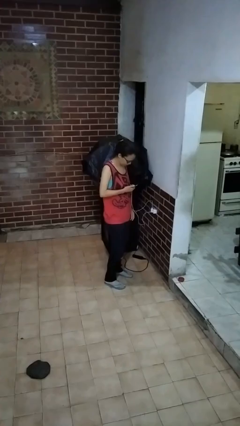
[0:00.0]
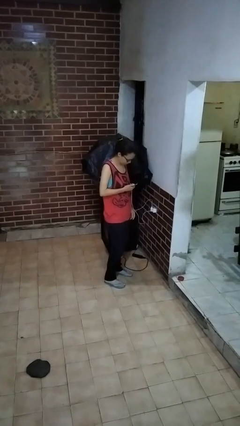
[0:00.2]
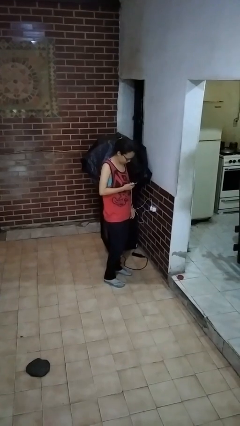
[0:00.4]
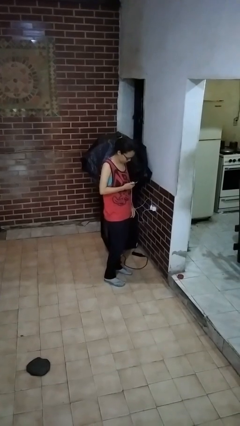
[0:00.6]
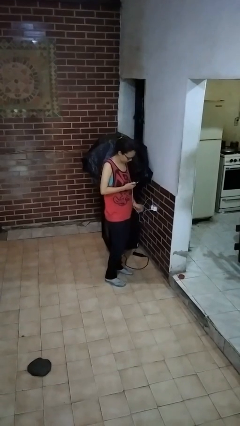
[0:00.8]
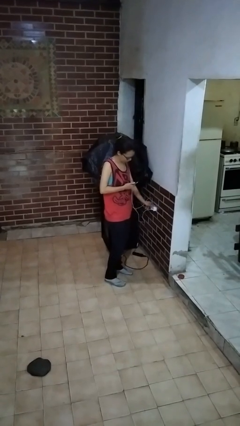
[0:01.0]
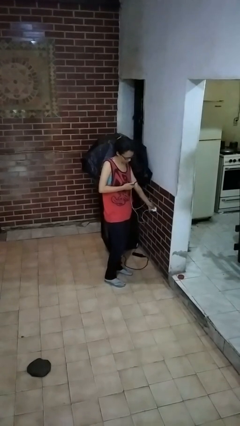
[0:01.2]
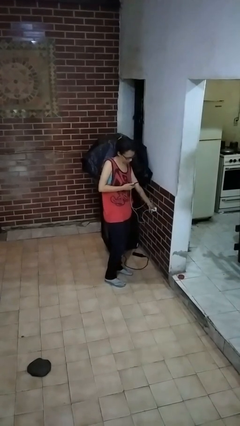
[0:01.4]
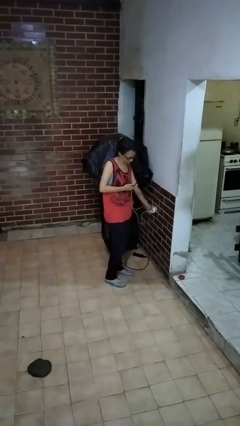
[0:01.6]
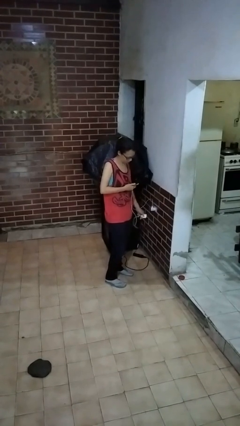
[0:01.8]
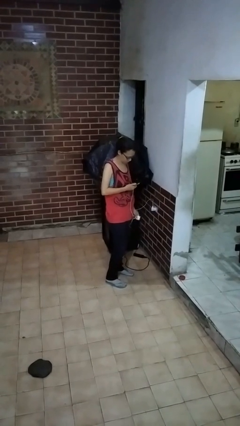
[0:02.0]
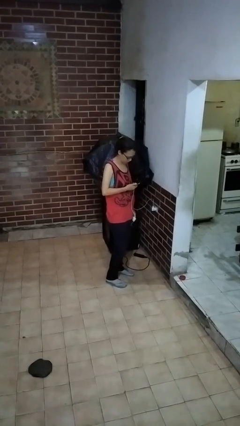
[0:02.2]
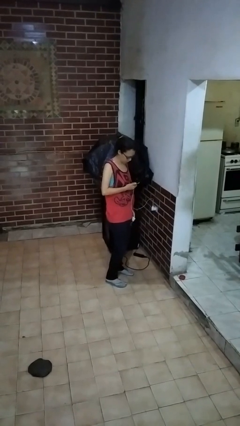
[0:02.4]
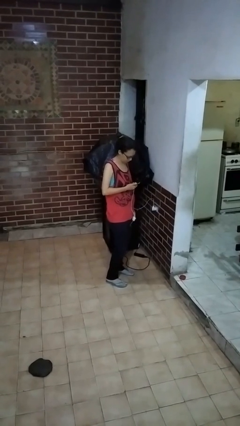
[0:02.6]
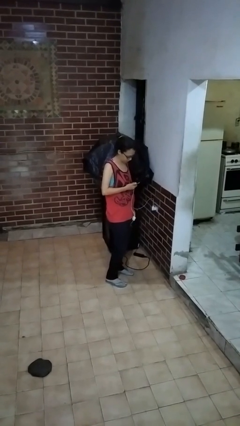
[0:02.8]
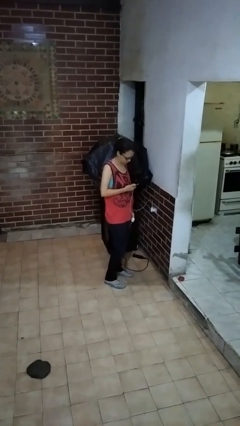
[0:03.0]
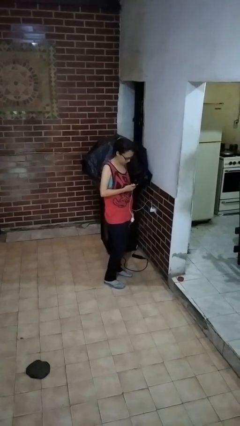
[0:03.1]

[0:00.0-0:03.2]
person unplugs from electrical socket

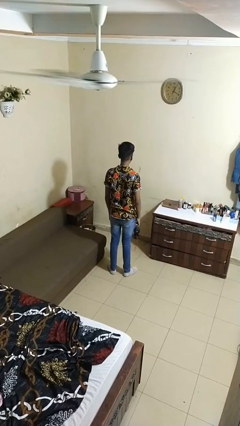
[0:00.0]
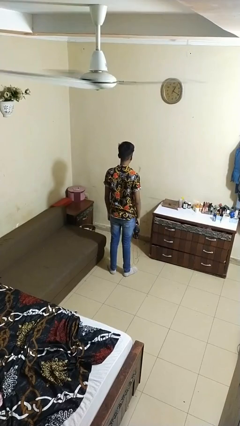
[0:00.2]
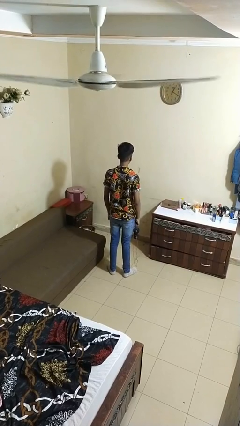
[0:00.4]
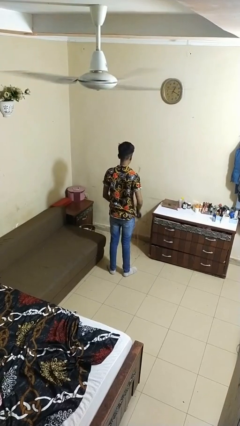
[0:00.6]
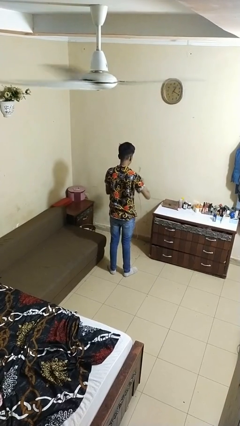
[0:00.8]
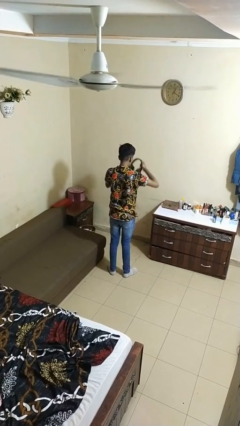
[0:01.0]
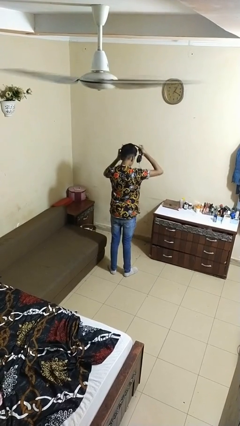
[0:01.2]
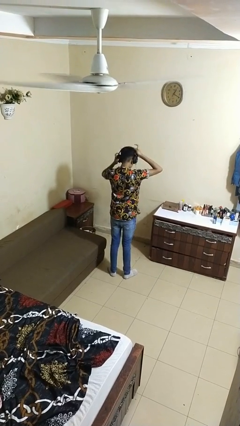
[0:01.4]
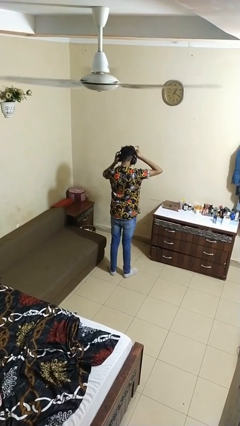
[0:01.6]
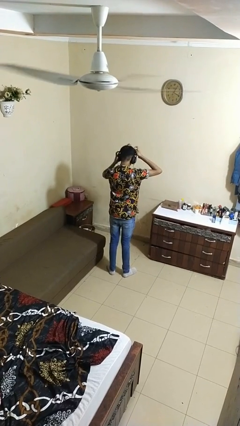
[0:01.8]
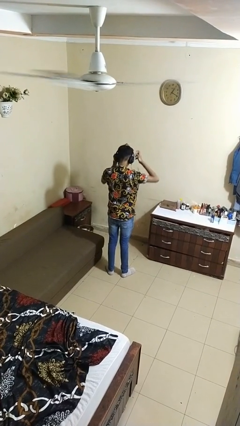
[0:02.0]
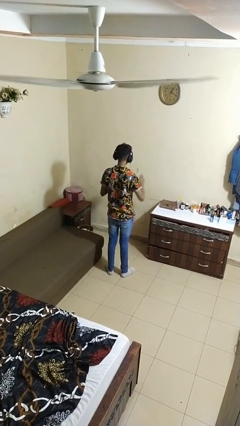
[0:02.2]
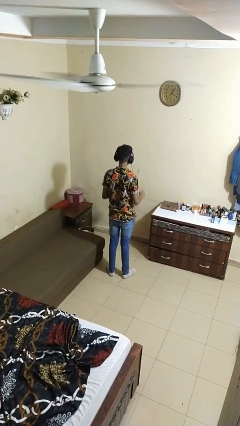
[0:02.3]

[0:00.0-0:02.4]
person puts on headphones

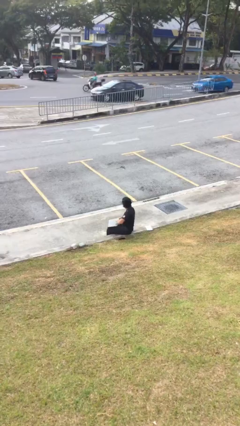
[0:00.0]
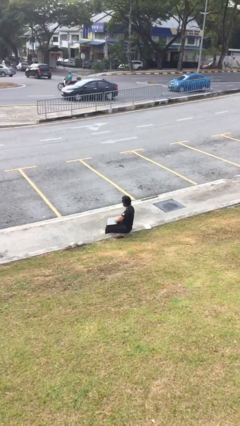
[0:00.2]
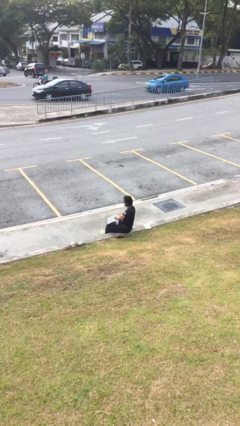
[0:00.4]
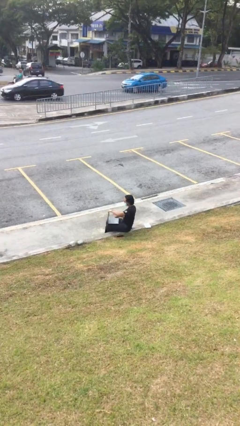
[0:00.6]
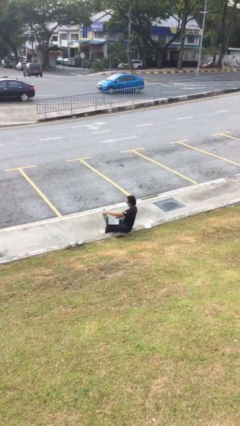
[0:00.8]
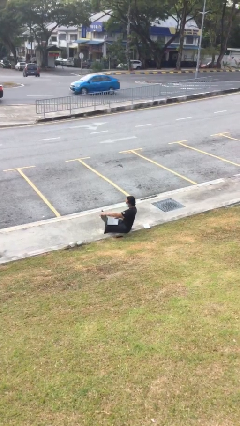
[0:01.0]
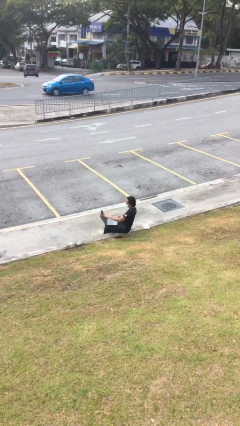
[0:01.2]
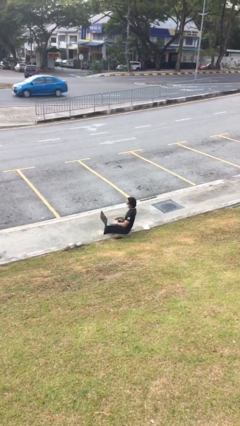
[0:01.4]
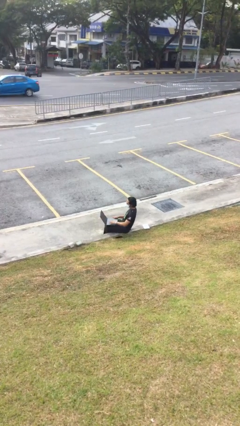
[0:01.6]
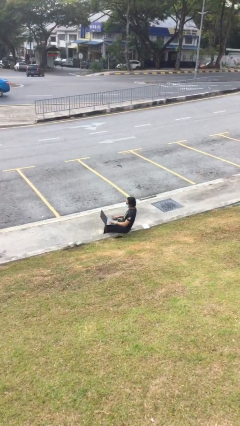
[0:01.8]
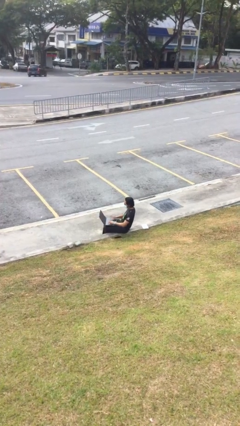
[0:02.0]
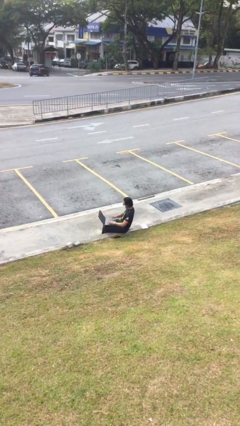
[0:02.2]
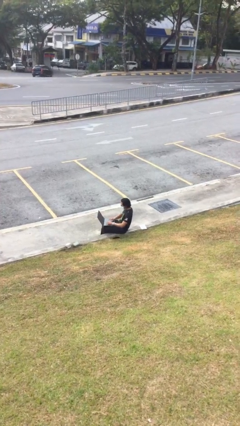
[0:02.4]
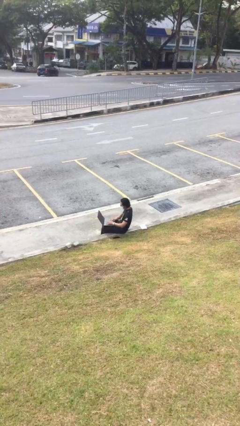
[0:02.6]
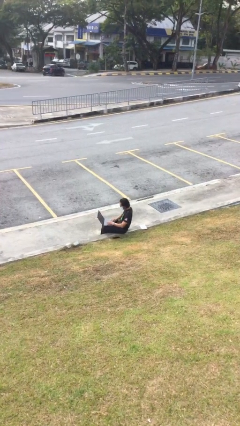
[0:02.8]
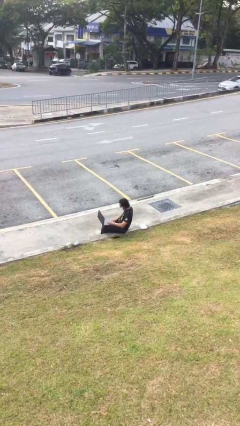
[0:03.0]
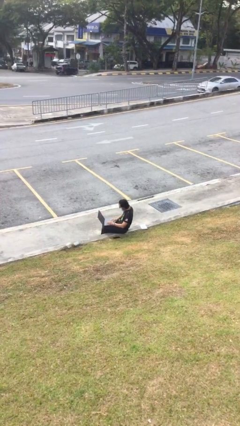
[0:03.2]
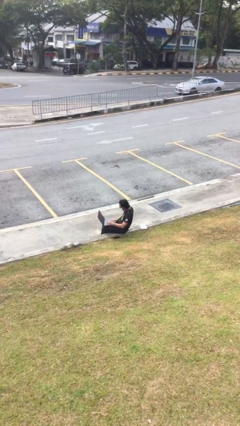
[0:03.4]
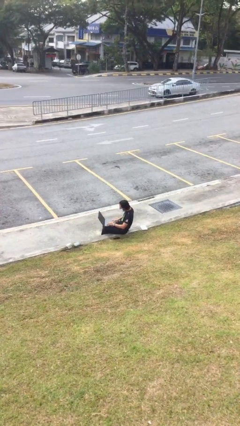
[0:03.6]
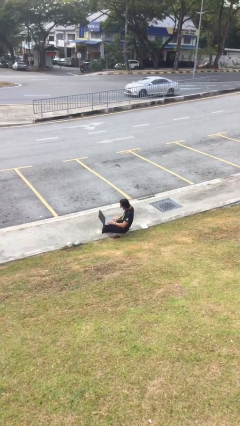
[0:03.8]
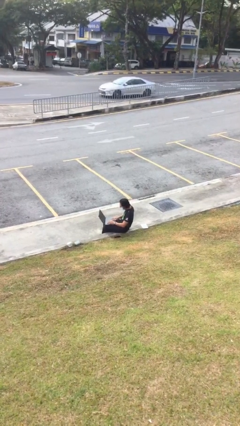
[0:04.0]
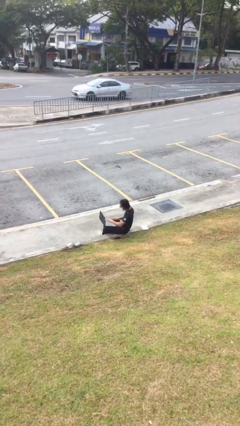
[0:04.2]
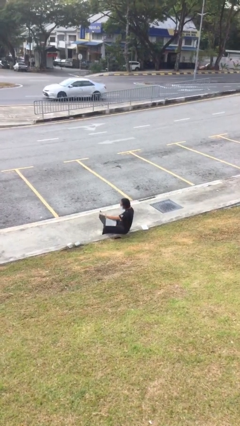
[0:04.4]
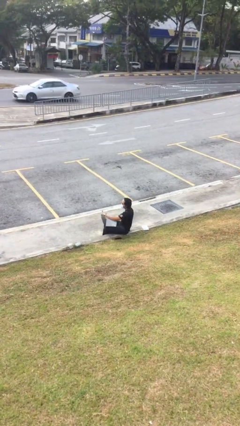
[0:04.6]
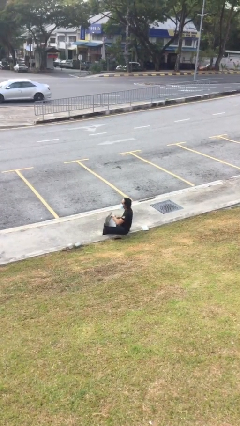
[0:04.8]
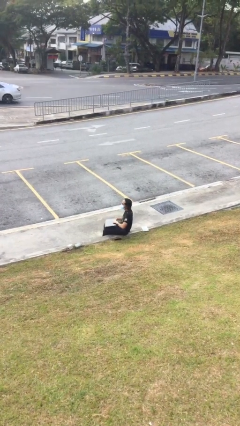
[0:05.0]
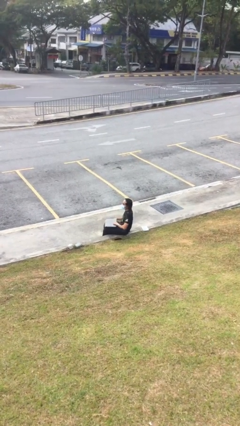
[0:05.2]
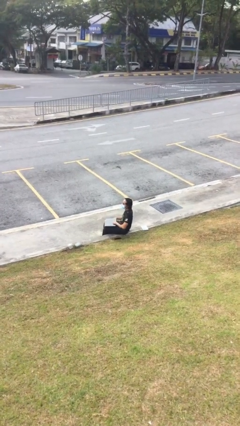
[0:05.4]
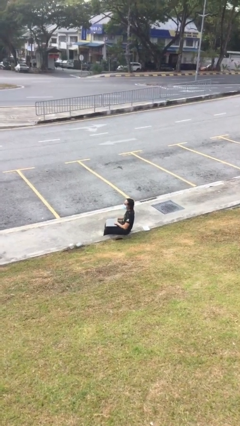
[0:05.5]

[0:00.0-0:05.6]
person interacts with laptop

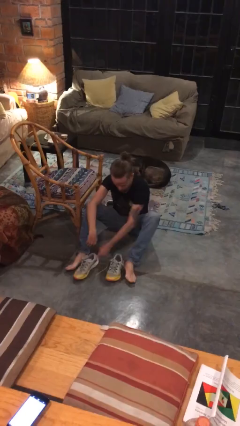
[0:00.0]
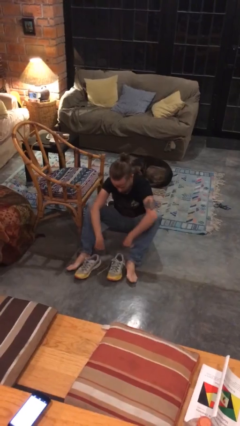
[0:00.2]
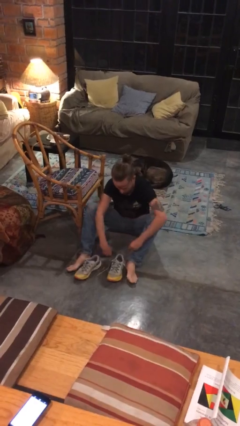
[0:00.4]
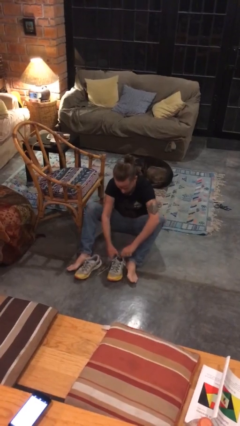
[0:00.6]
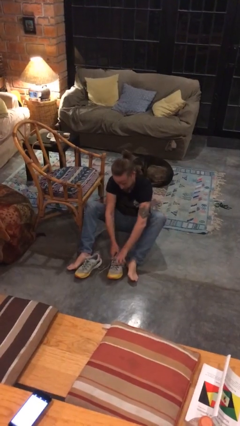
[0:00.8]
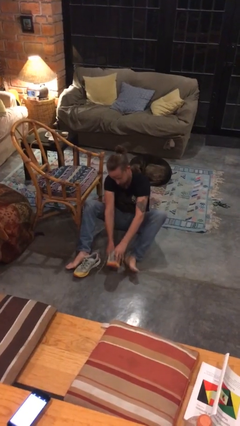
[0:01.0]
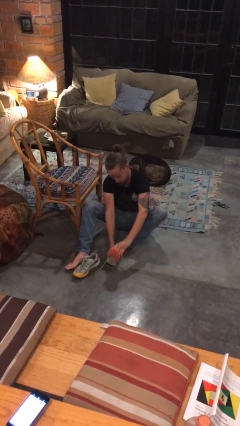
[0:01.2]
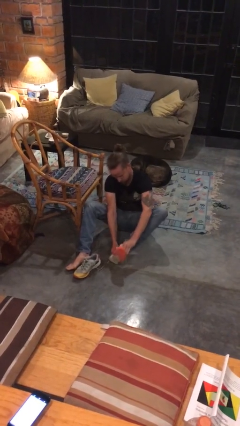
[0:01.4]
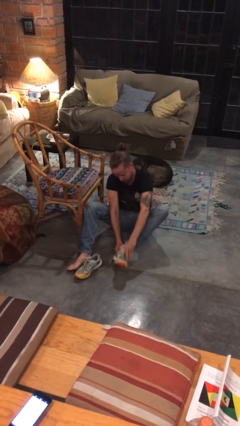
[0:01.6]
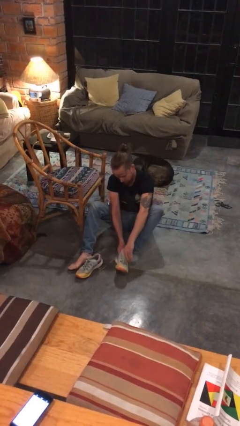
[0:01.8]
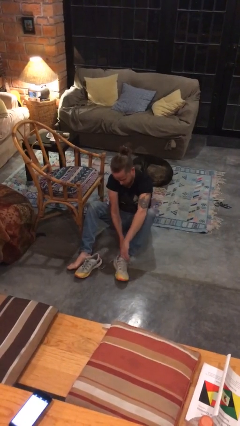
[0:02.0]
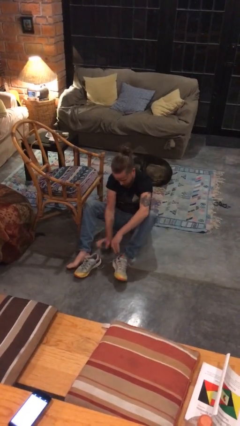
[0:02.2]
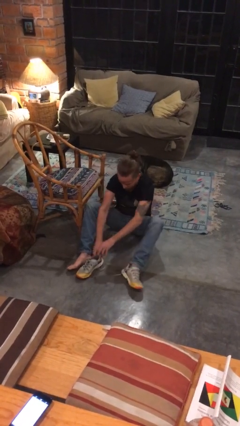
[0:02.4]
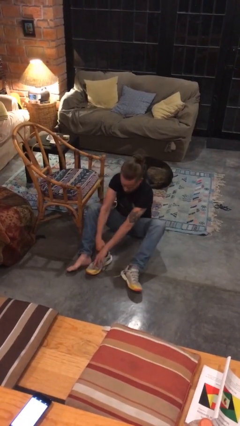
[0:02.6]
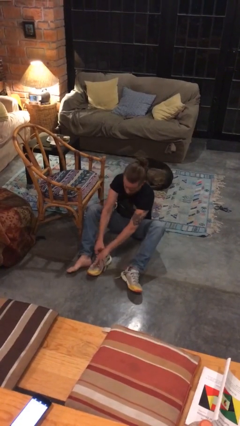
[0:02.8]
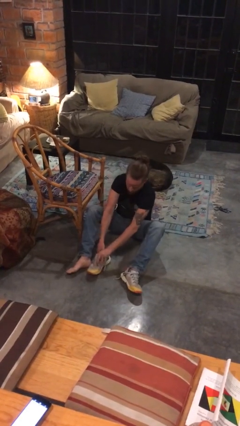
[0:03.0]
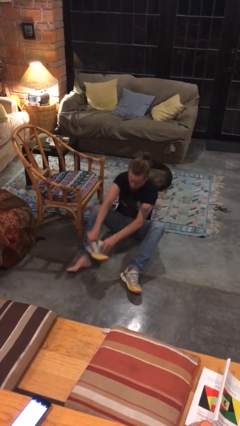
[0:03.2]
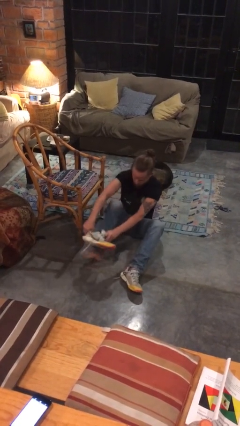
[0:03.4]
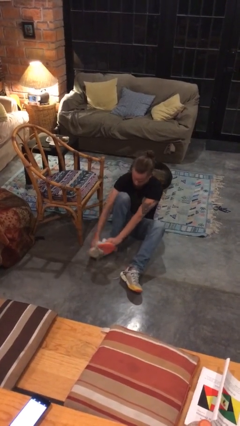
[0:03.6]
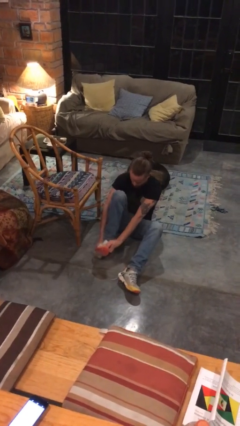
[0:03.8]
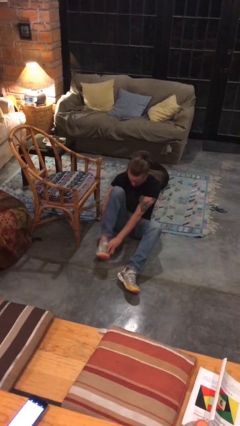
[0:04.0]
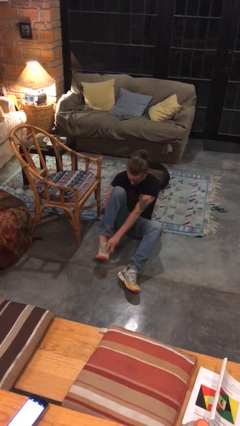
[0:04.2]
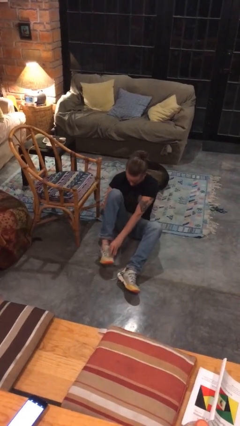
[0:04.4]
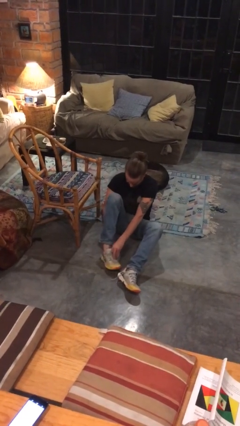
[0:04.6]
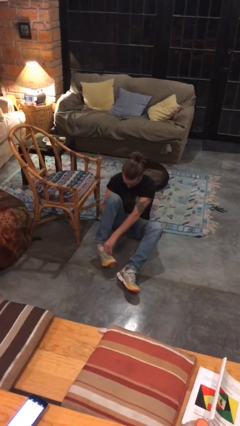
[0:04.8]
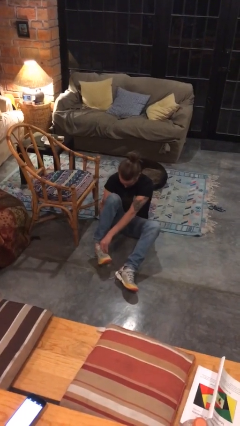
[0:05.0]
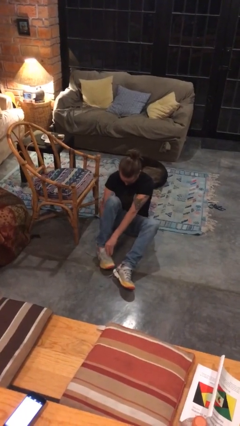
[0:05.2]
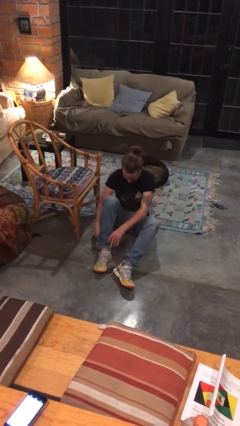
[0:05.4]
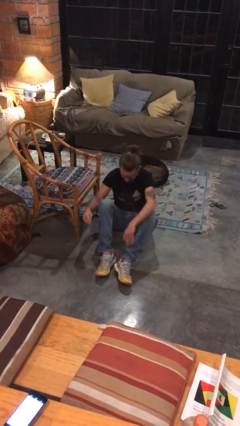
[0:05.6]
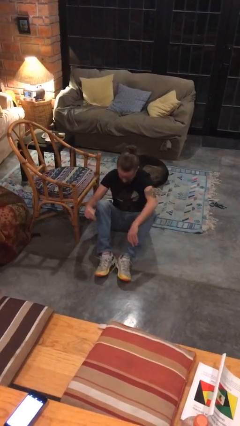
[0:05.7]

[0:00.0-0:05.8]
person puts on shoes

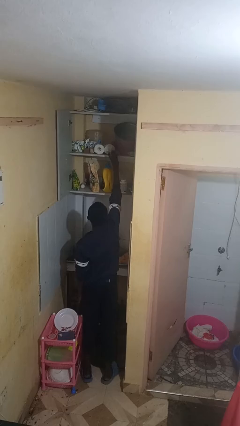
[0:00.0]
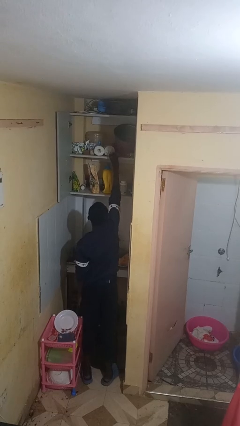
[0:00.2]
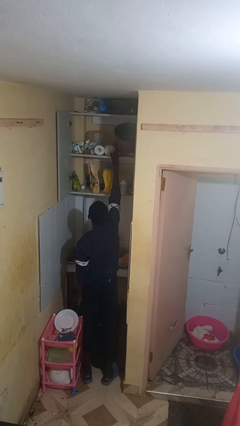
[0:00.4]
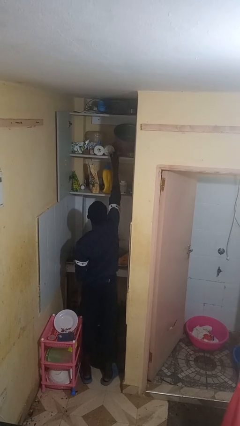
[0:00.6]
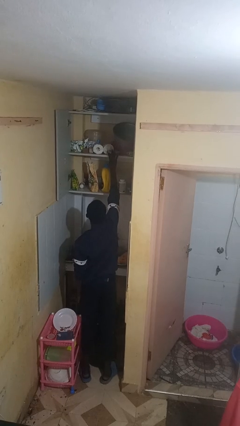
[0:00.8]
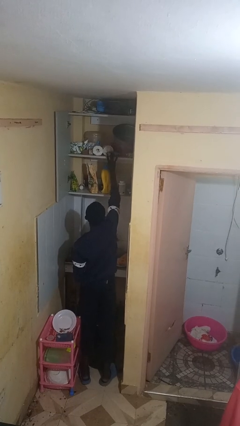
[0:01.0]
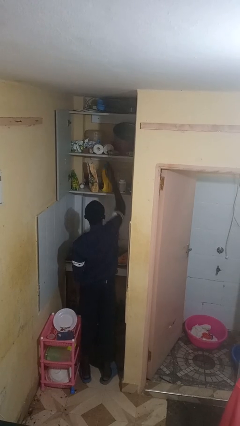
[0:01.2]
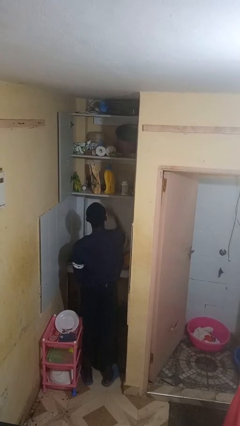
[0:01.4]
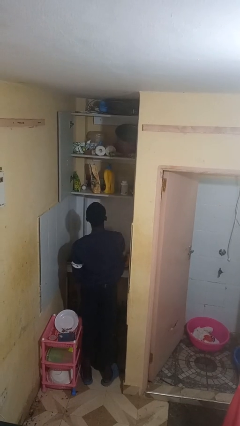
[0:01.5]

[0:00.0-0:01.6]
person puts object in cabinet
